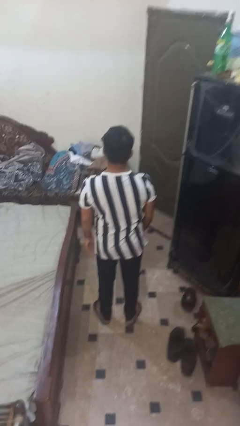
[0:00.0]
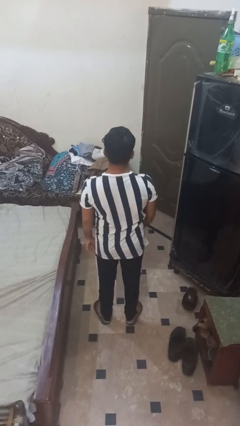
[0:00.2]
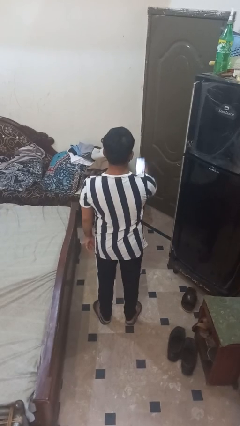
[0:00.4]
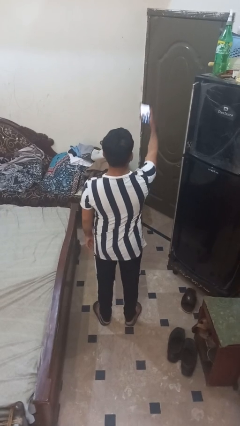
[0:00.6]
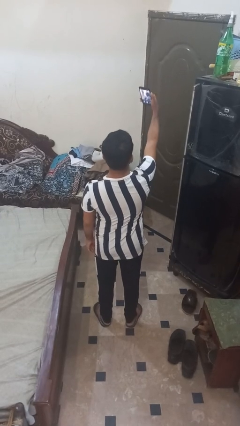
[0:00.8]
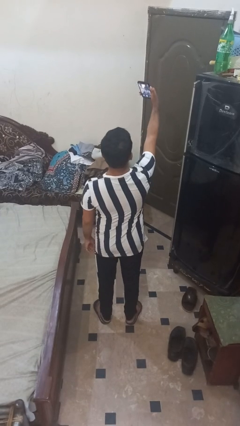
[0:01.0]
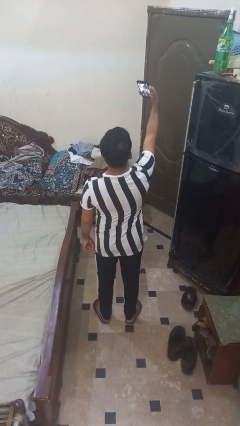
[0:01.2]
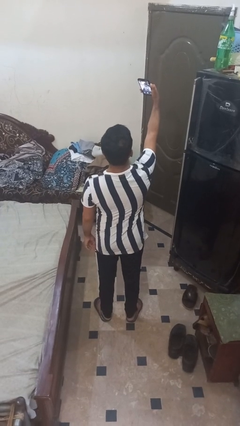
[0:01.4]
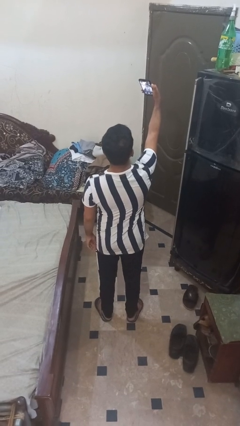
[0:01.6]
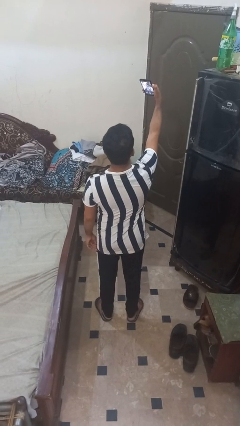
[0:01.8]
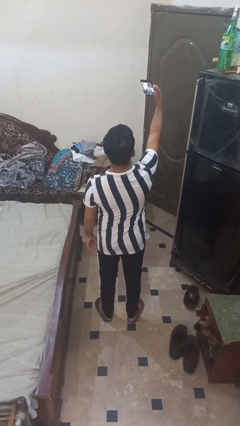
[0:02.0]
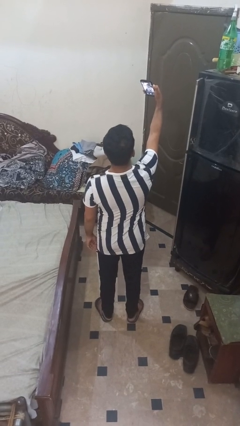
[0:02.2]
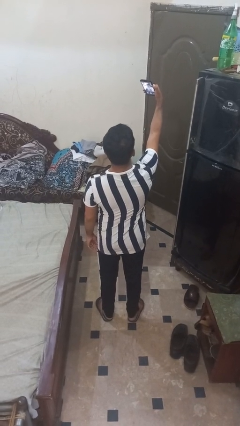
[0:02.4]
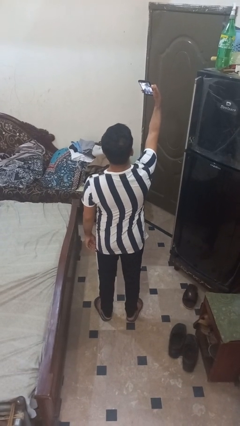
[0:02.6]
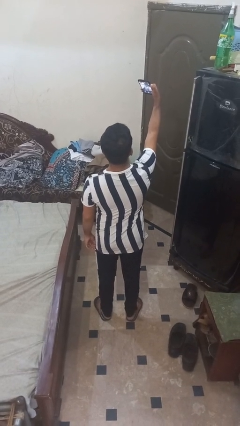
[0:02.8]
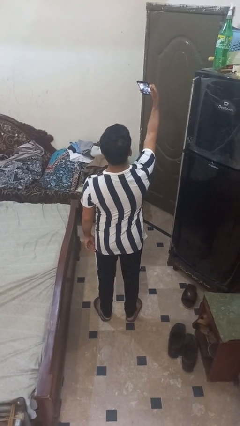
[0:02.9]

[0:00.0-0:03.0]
person takes selfie

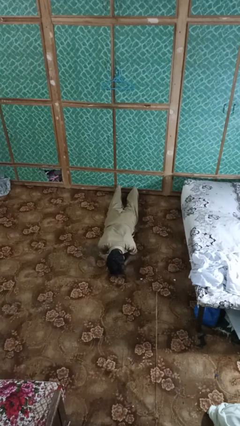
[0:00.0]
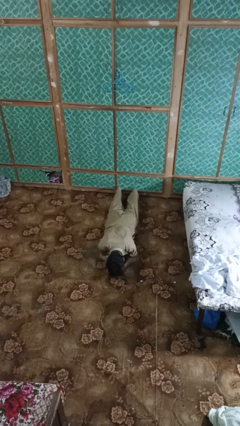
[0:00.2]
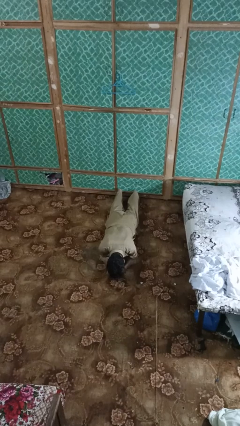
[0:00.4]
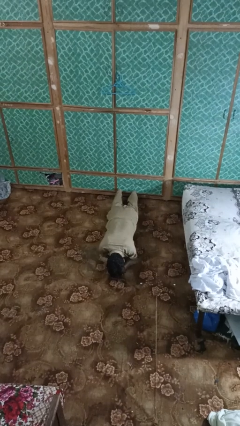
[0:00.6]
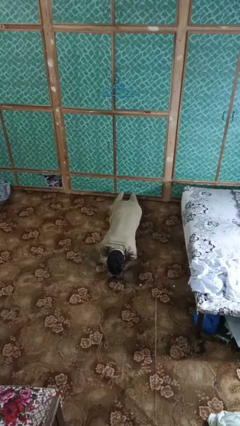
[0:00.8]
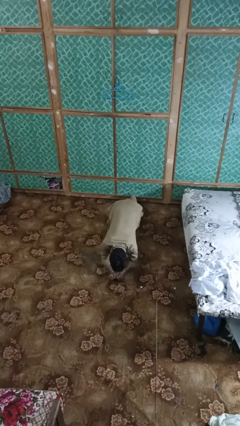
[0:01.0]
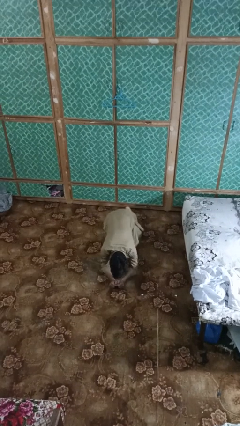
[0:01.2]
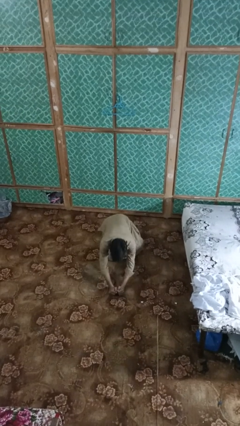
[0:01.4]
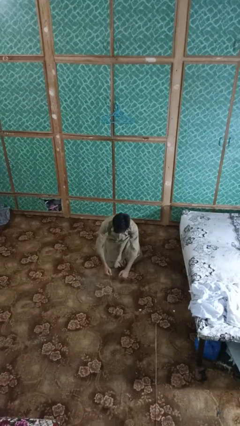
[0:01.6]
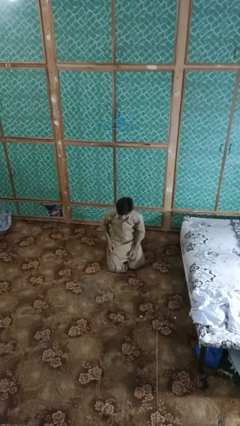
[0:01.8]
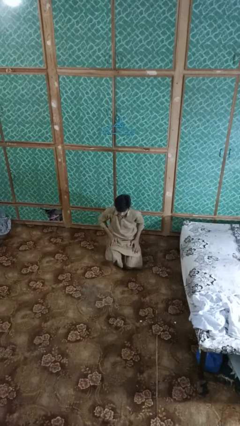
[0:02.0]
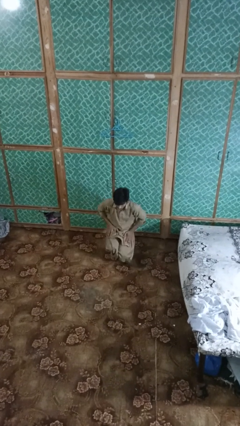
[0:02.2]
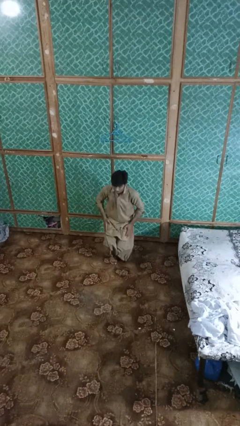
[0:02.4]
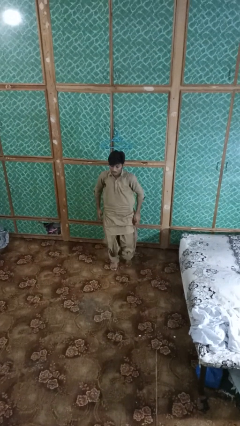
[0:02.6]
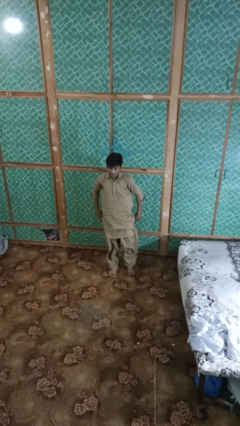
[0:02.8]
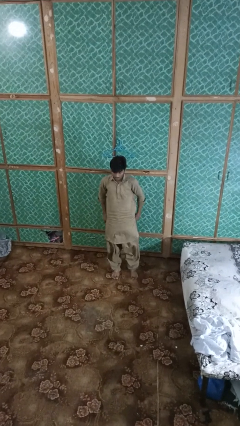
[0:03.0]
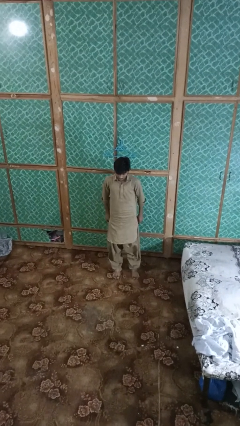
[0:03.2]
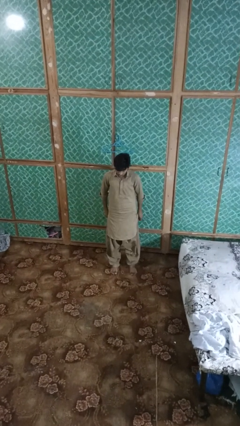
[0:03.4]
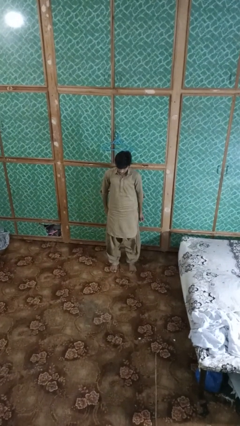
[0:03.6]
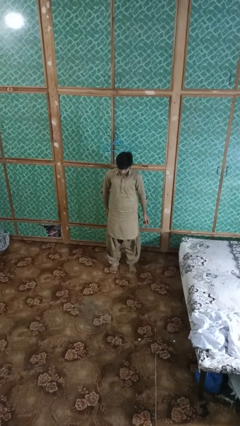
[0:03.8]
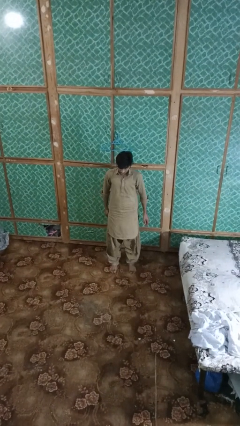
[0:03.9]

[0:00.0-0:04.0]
person stands up from floor

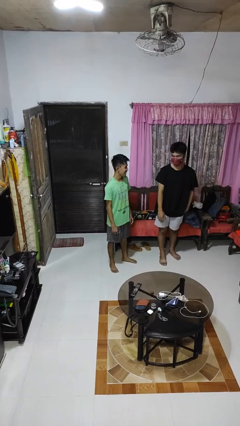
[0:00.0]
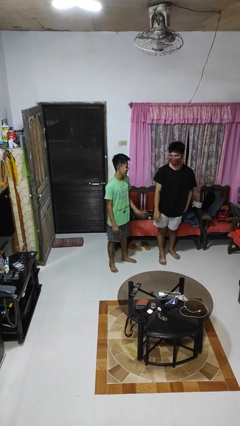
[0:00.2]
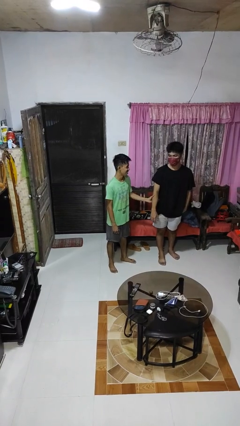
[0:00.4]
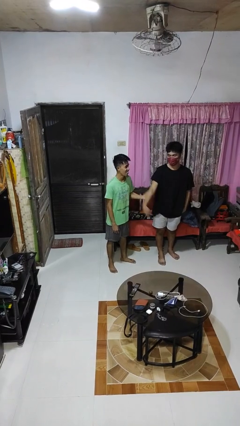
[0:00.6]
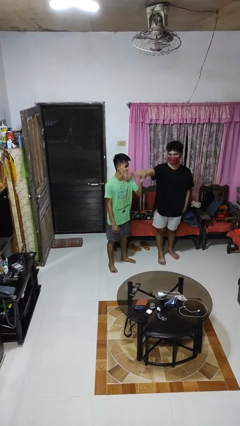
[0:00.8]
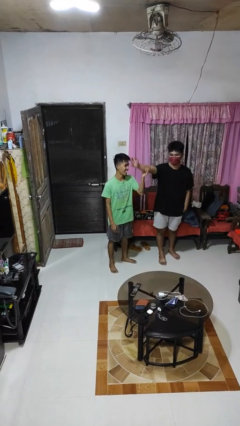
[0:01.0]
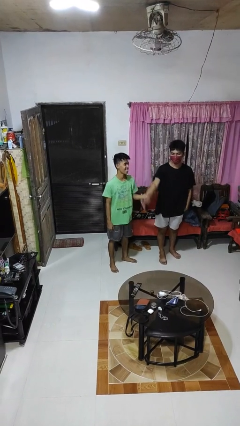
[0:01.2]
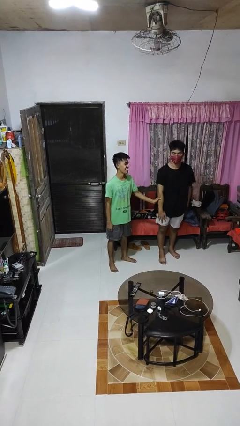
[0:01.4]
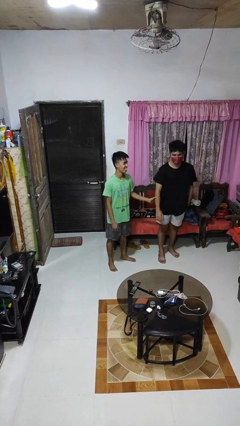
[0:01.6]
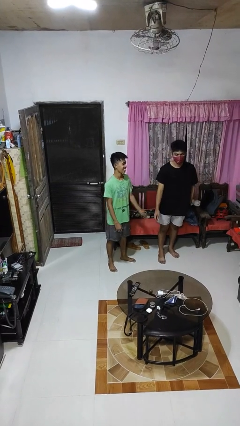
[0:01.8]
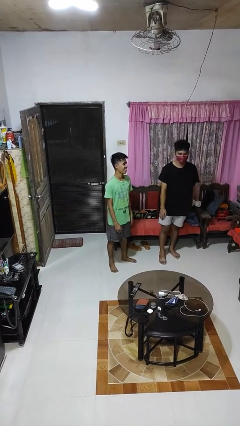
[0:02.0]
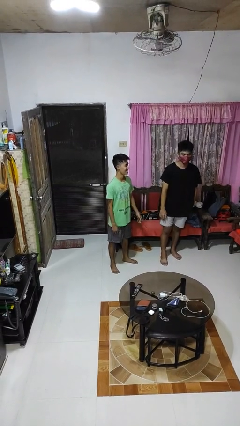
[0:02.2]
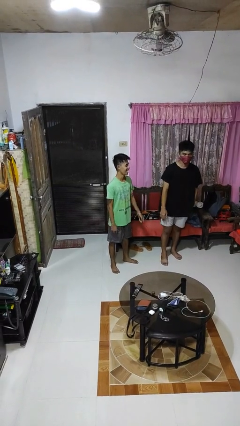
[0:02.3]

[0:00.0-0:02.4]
person grabs person by forearm

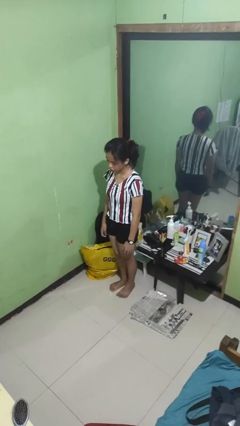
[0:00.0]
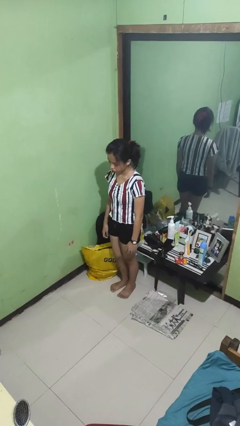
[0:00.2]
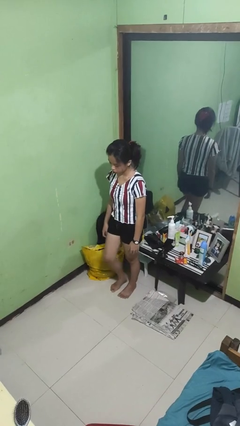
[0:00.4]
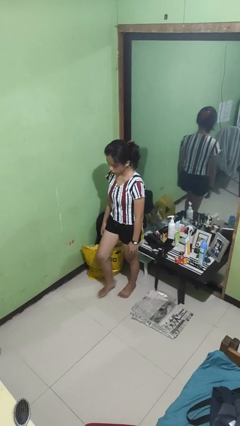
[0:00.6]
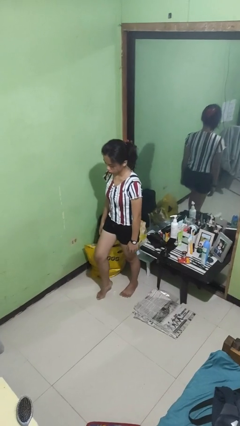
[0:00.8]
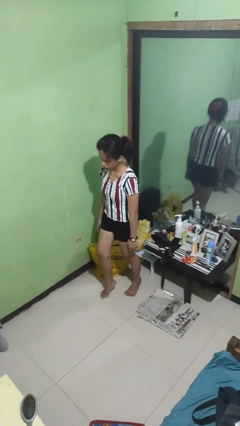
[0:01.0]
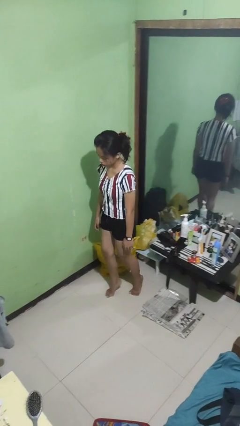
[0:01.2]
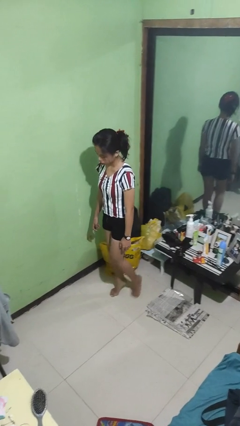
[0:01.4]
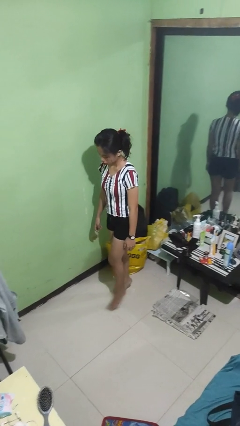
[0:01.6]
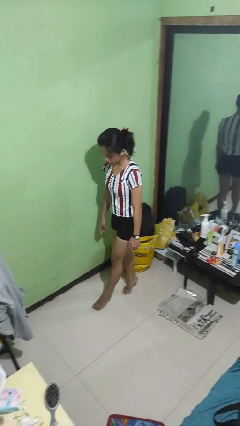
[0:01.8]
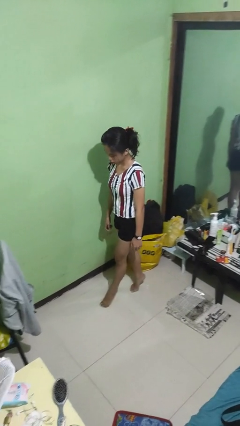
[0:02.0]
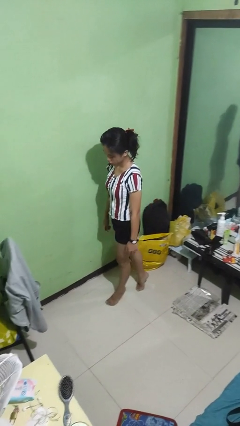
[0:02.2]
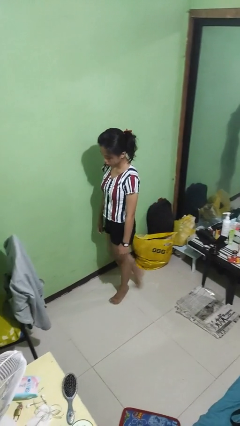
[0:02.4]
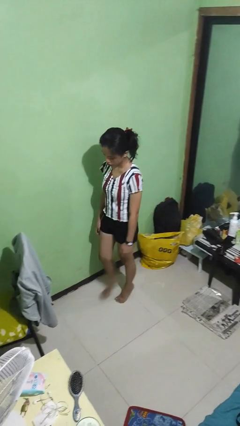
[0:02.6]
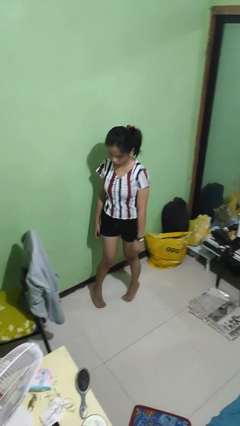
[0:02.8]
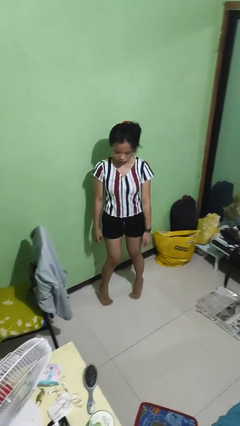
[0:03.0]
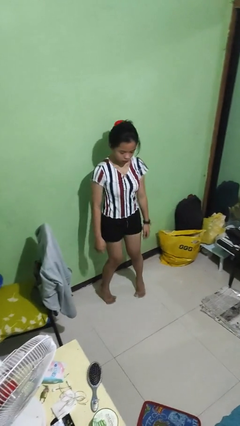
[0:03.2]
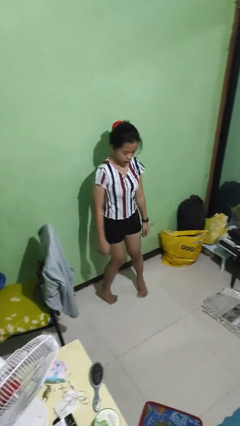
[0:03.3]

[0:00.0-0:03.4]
person walks tiptoe

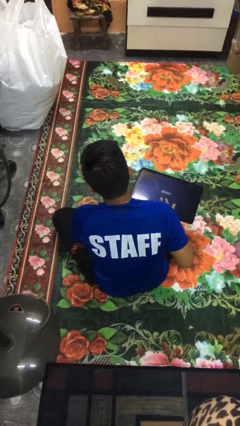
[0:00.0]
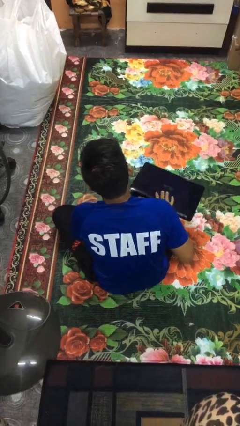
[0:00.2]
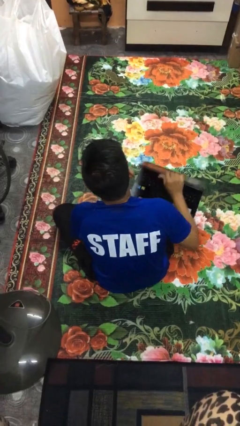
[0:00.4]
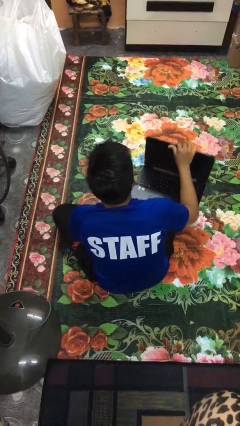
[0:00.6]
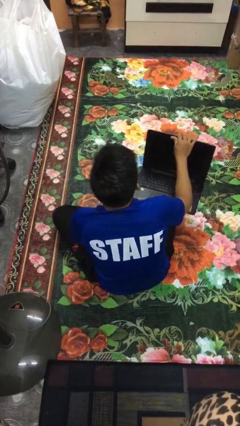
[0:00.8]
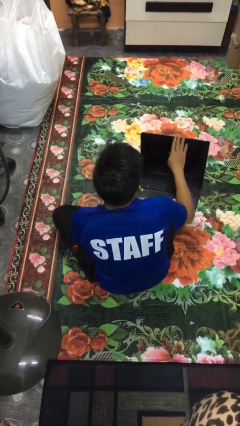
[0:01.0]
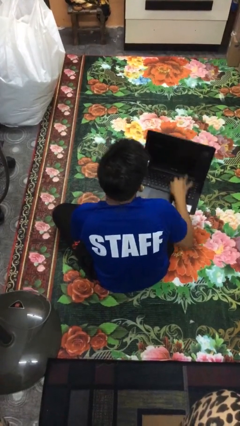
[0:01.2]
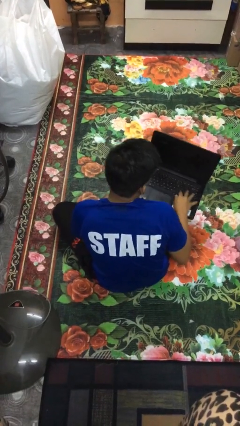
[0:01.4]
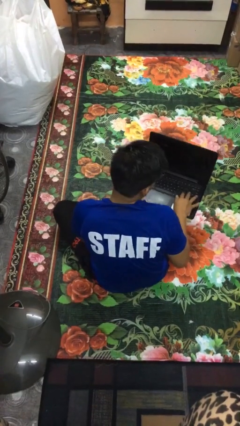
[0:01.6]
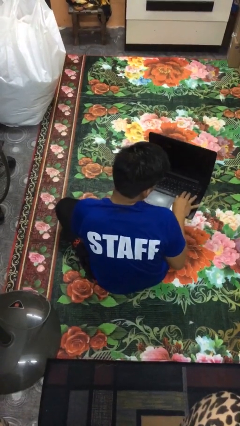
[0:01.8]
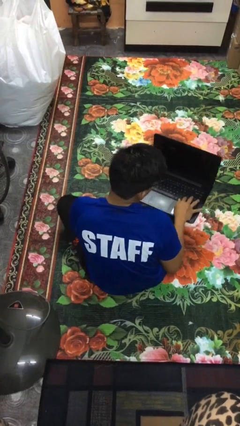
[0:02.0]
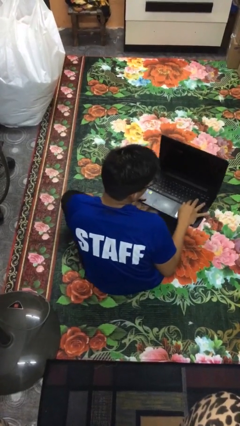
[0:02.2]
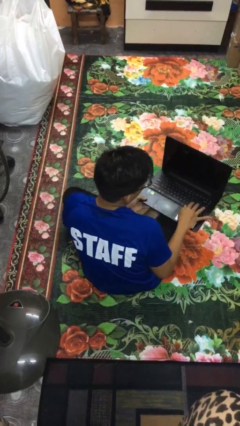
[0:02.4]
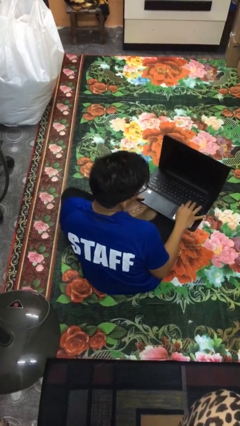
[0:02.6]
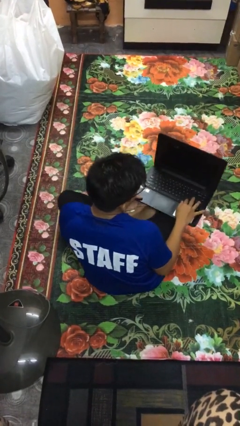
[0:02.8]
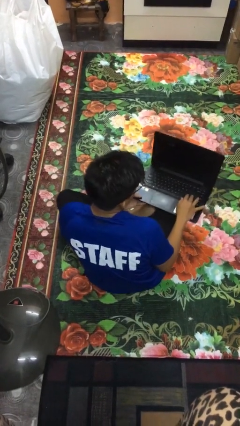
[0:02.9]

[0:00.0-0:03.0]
person opens laptop

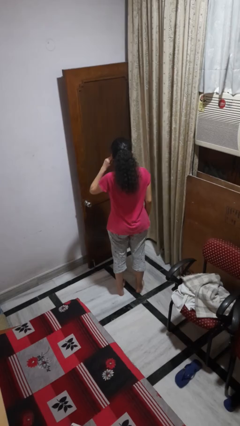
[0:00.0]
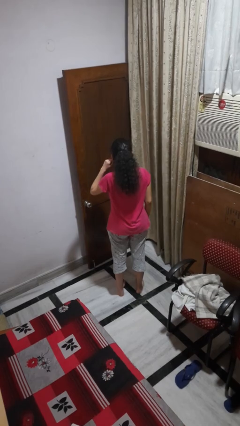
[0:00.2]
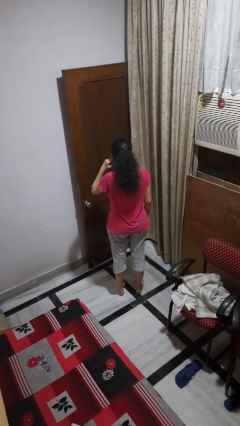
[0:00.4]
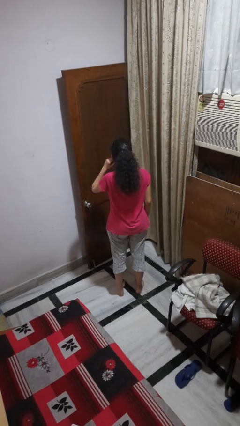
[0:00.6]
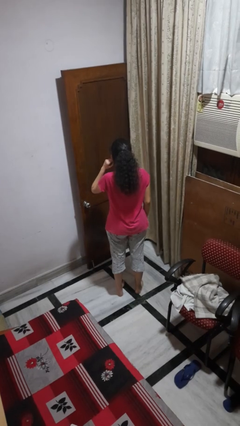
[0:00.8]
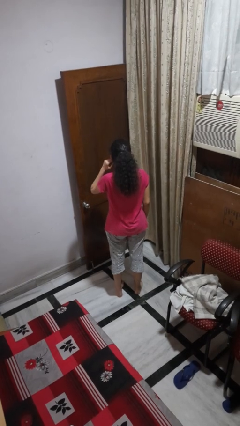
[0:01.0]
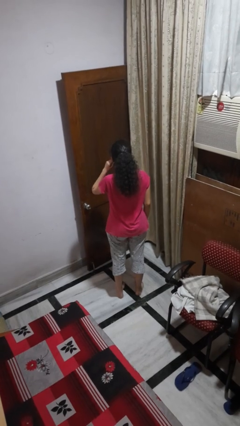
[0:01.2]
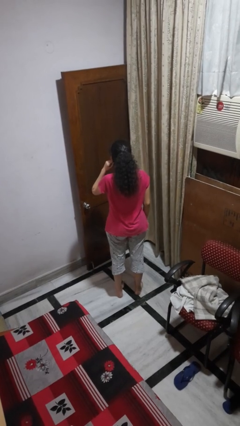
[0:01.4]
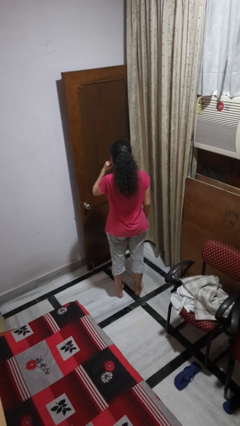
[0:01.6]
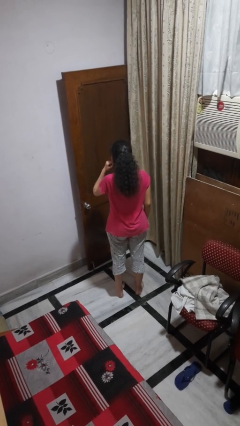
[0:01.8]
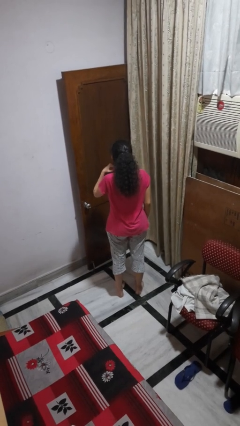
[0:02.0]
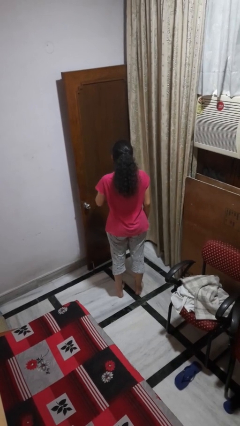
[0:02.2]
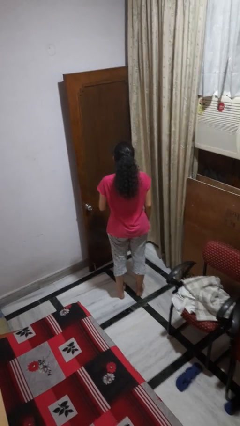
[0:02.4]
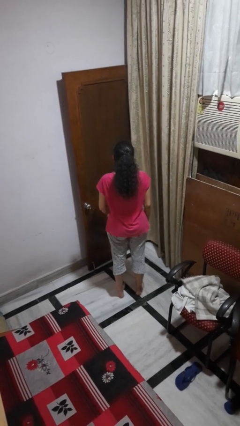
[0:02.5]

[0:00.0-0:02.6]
person touches earlobe
